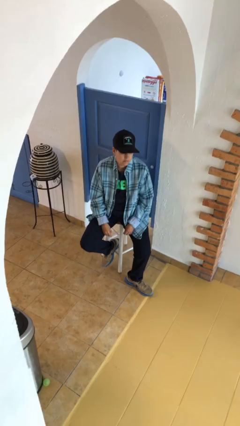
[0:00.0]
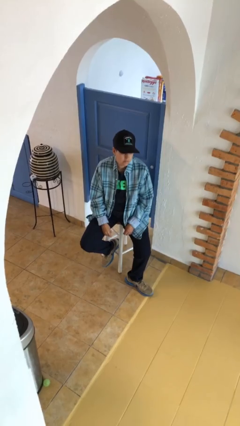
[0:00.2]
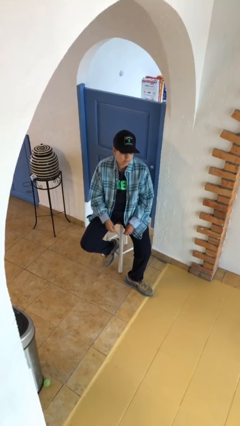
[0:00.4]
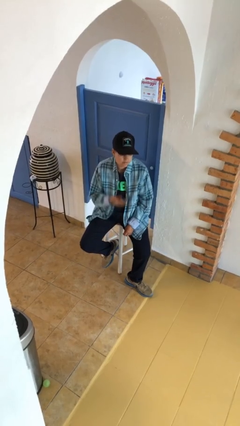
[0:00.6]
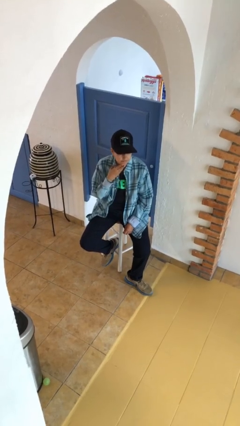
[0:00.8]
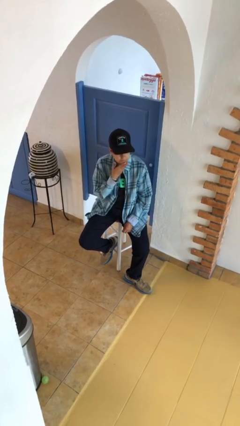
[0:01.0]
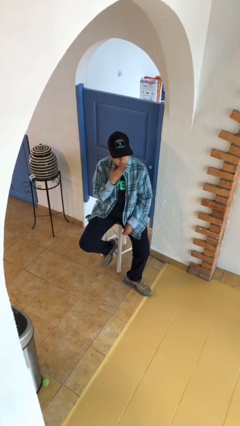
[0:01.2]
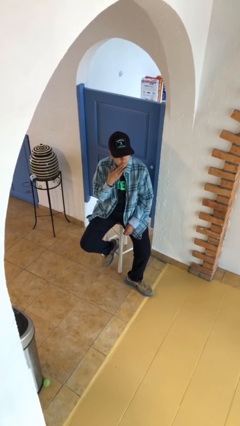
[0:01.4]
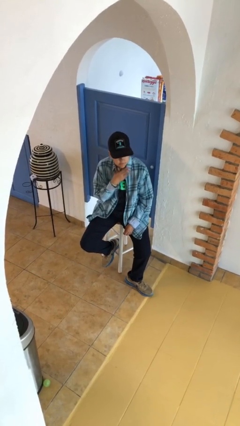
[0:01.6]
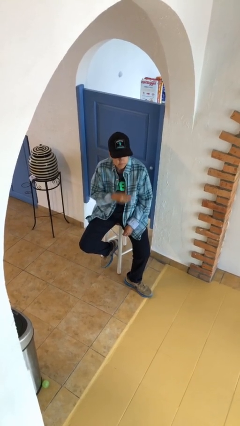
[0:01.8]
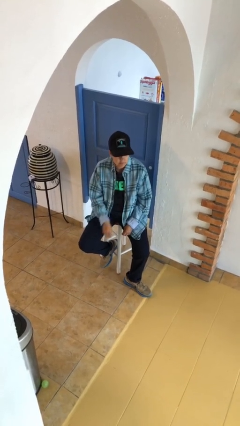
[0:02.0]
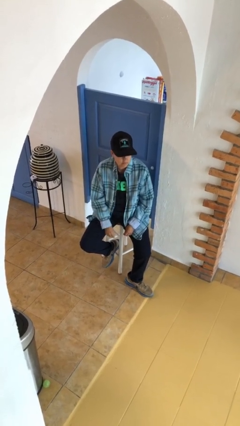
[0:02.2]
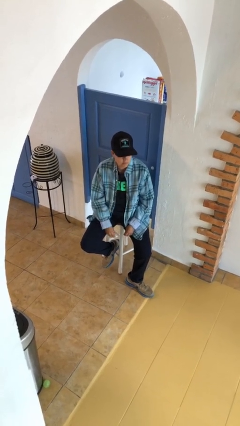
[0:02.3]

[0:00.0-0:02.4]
person strokes chin

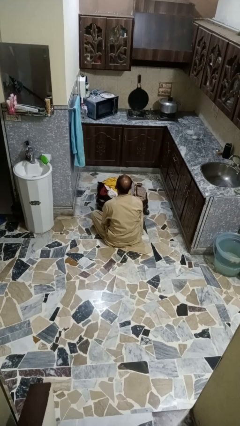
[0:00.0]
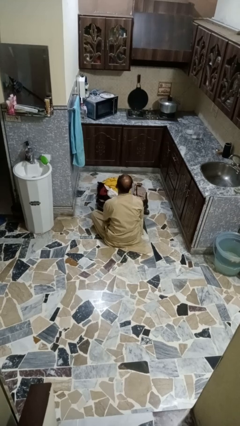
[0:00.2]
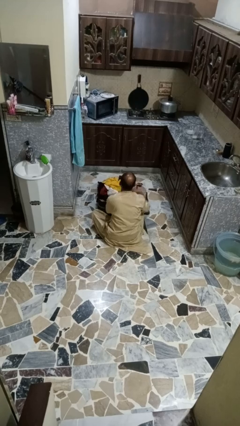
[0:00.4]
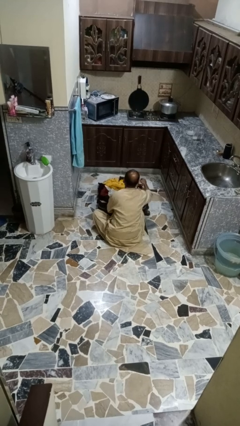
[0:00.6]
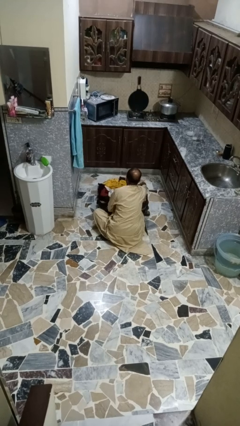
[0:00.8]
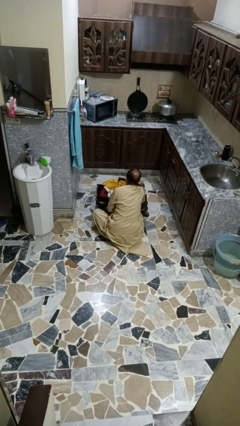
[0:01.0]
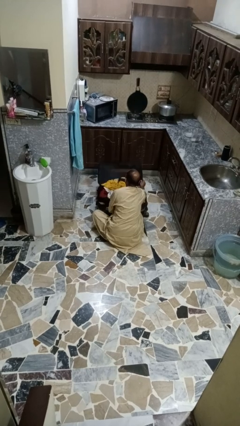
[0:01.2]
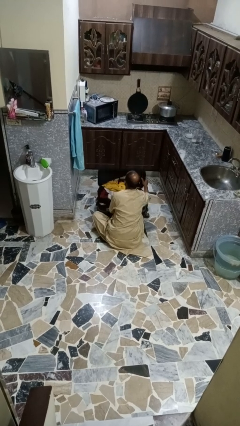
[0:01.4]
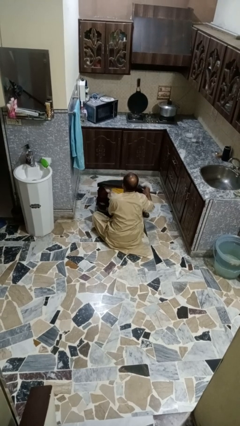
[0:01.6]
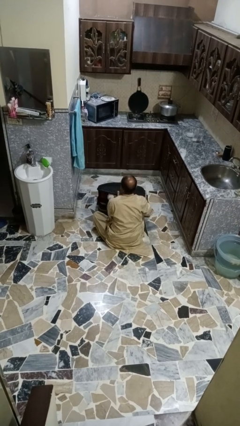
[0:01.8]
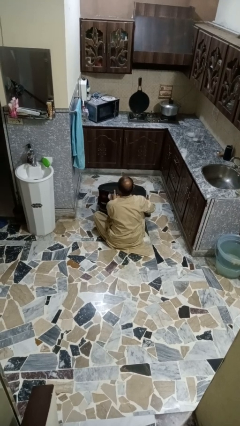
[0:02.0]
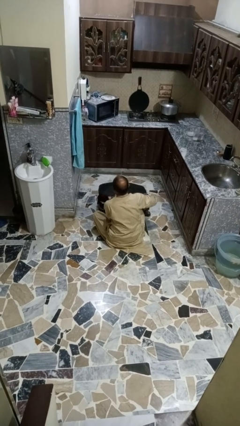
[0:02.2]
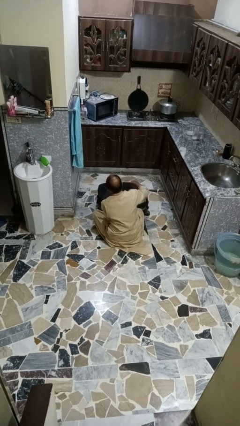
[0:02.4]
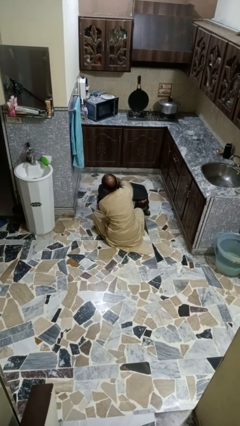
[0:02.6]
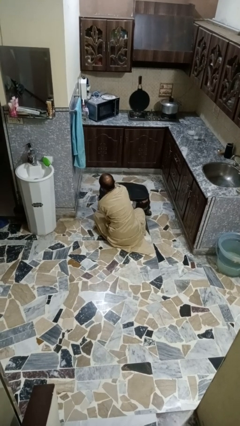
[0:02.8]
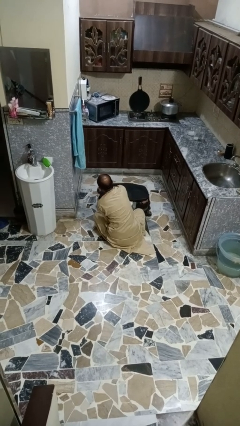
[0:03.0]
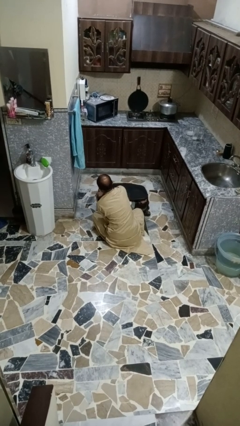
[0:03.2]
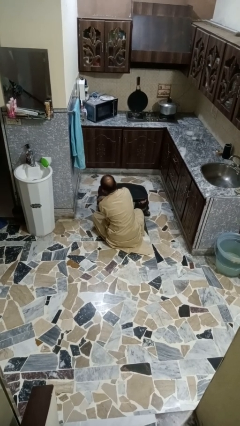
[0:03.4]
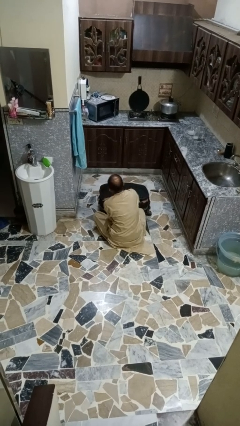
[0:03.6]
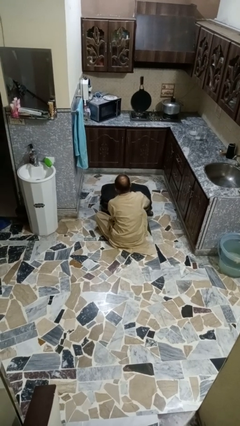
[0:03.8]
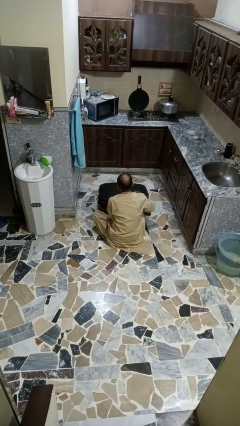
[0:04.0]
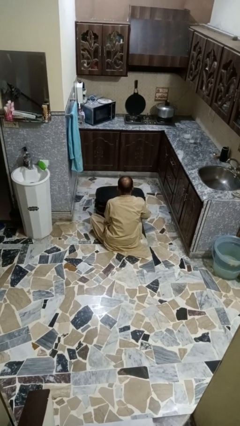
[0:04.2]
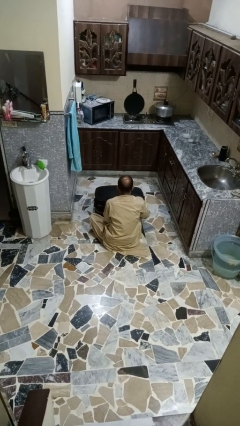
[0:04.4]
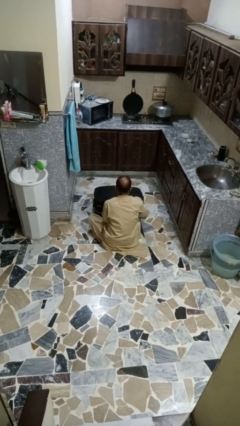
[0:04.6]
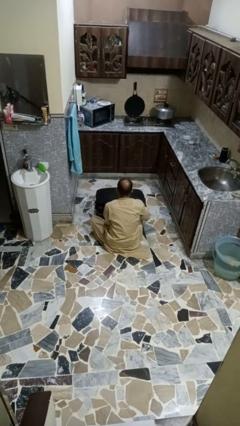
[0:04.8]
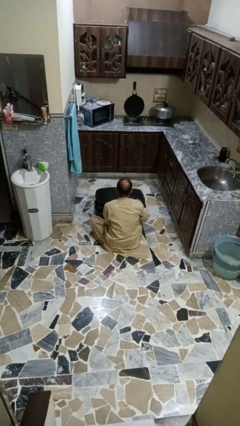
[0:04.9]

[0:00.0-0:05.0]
person closes suitcase

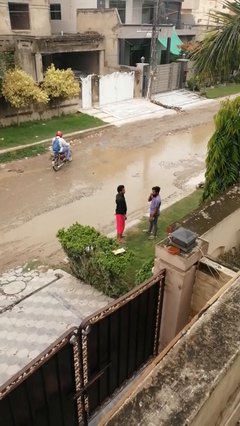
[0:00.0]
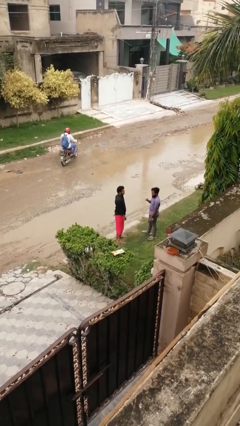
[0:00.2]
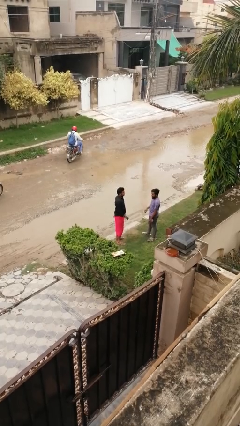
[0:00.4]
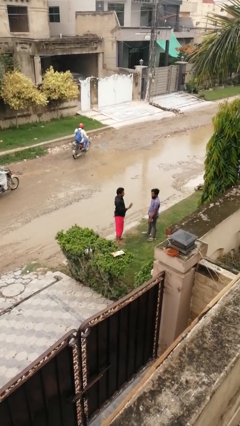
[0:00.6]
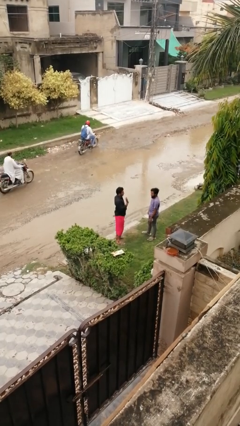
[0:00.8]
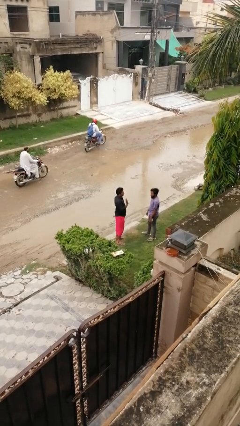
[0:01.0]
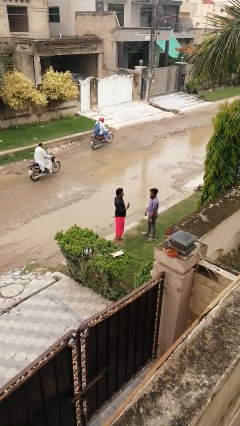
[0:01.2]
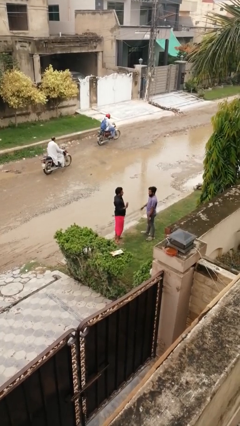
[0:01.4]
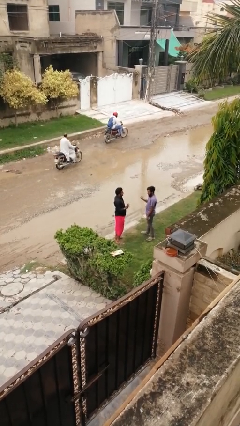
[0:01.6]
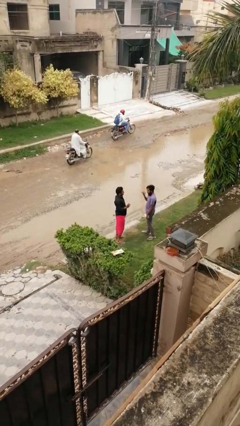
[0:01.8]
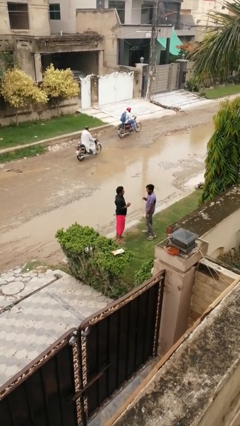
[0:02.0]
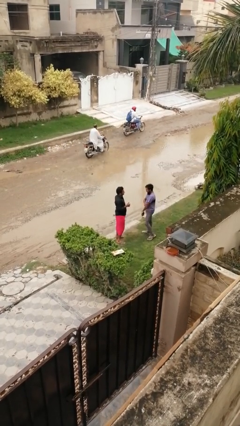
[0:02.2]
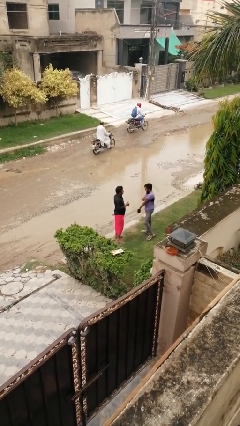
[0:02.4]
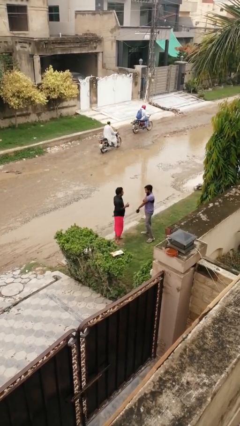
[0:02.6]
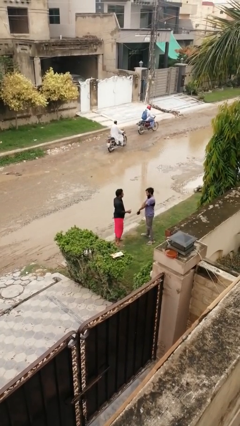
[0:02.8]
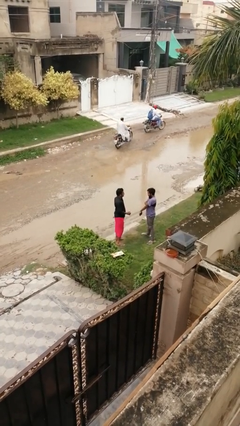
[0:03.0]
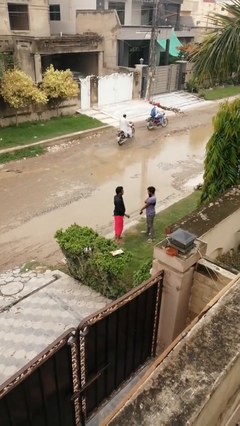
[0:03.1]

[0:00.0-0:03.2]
person talks to person

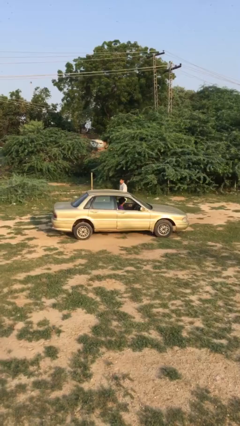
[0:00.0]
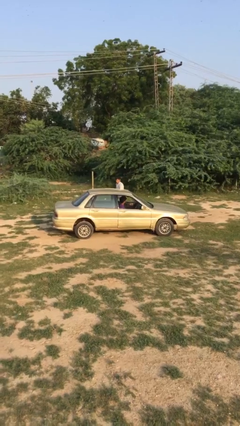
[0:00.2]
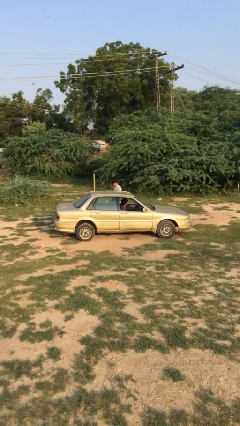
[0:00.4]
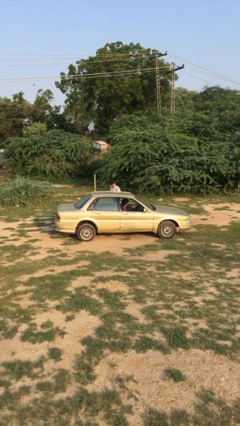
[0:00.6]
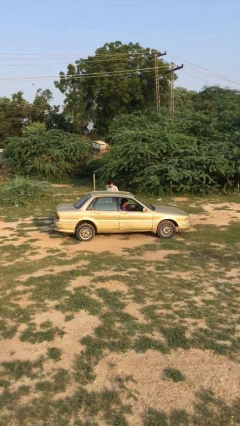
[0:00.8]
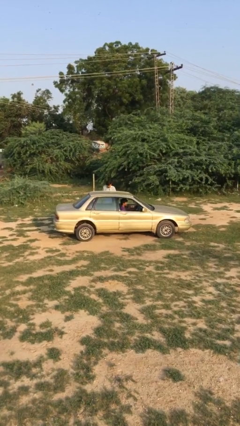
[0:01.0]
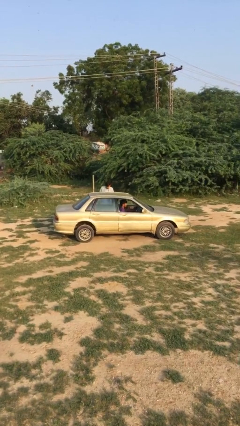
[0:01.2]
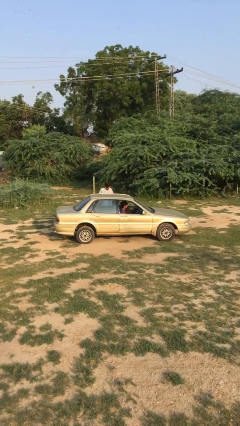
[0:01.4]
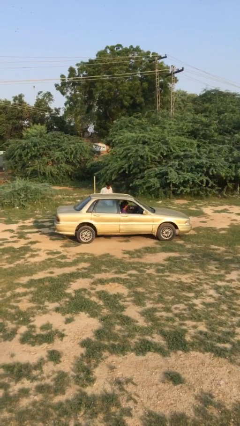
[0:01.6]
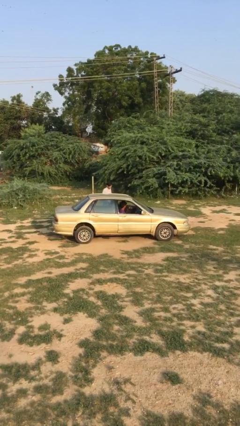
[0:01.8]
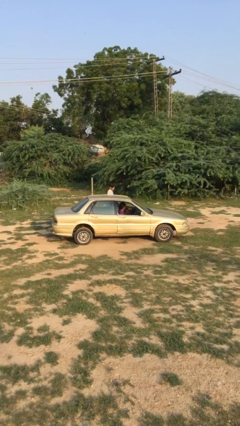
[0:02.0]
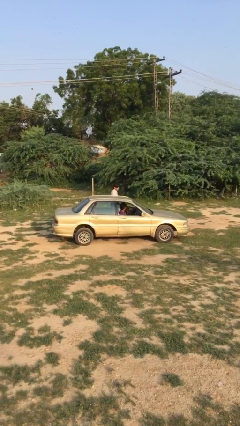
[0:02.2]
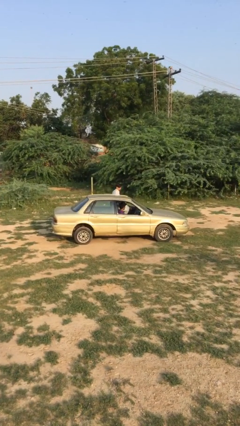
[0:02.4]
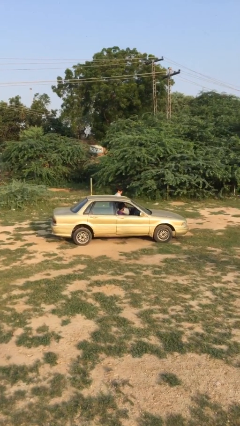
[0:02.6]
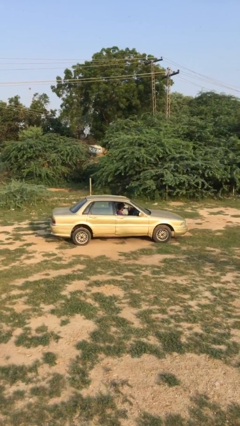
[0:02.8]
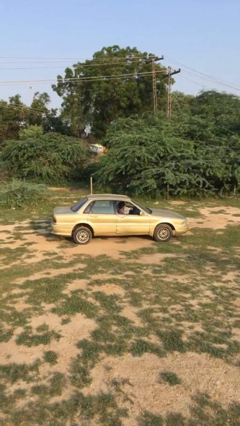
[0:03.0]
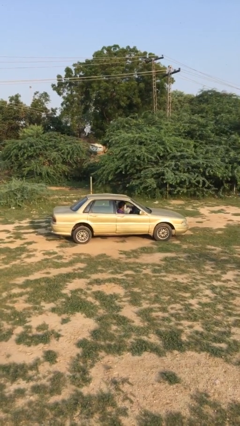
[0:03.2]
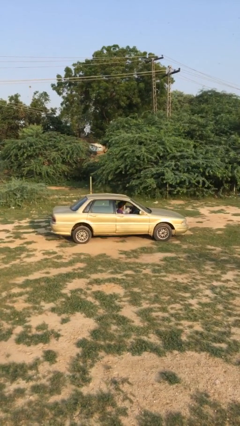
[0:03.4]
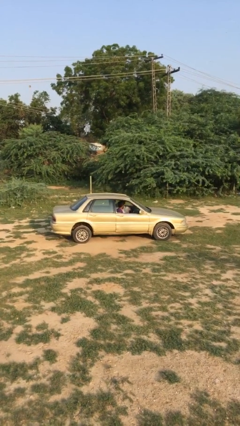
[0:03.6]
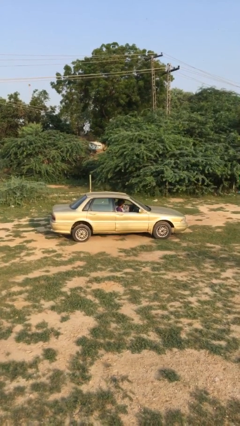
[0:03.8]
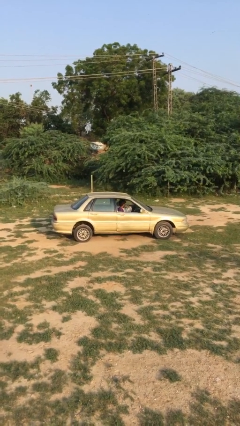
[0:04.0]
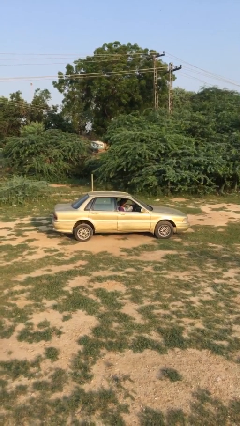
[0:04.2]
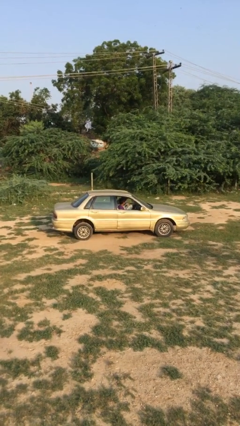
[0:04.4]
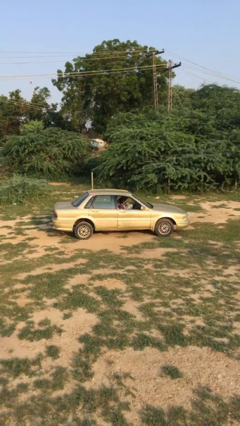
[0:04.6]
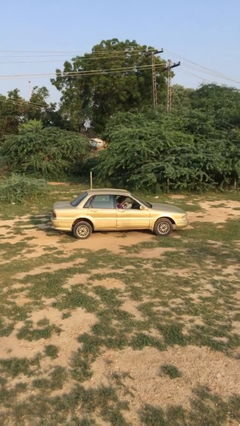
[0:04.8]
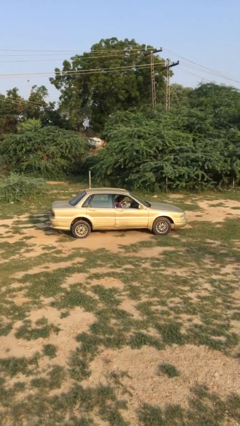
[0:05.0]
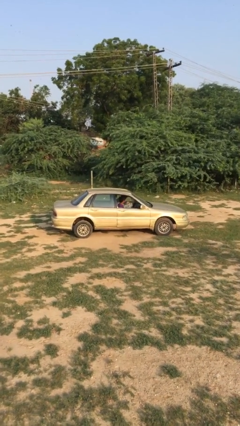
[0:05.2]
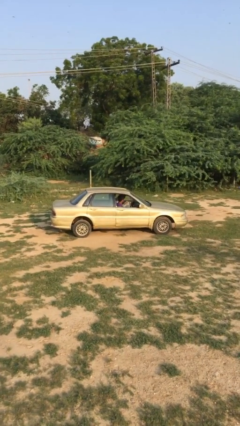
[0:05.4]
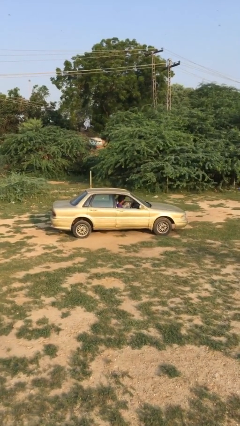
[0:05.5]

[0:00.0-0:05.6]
car picks up person

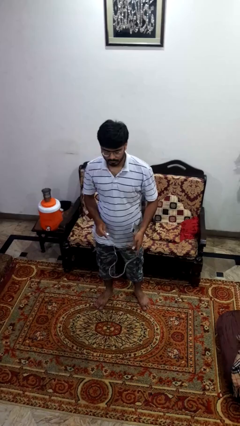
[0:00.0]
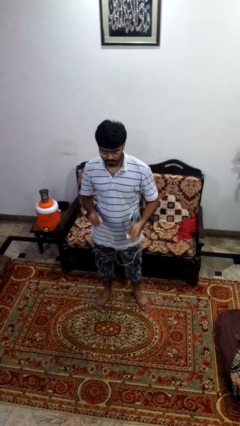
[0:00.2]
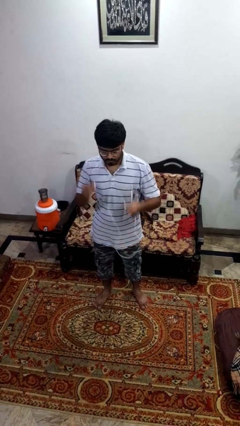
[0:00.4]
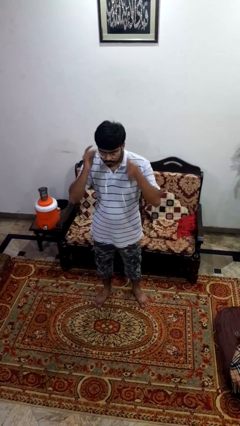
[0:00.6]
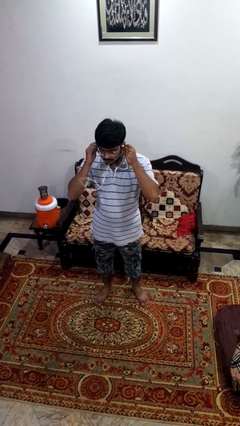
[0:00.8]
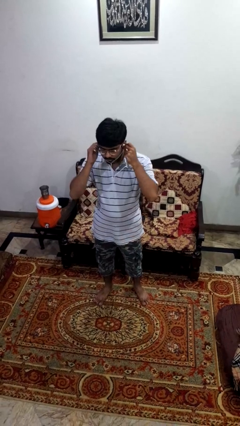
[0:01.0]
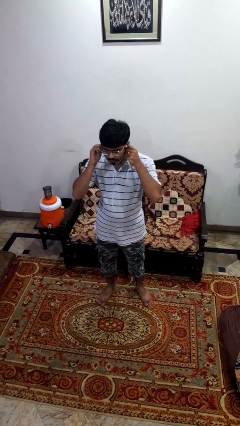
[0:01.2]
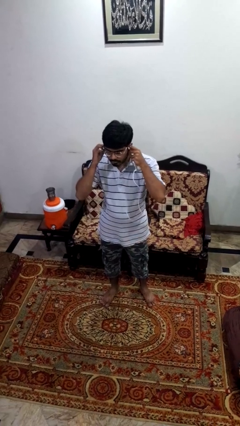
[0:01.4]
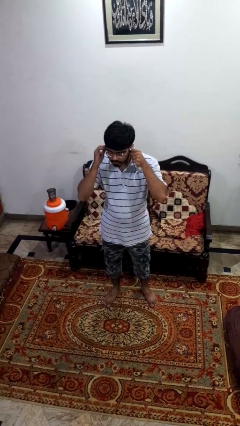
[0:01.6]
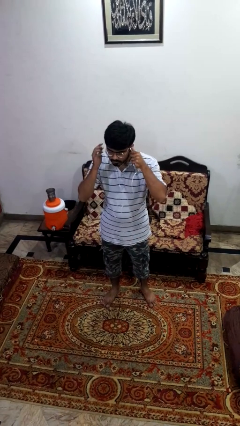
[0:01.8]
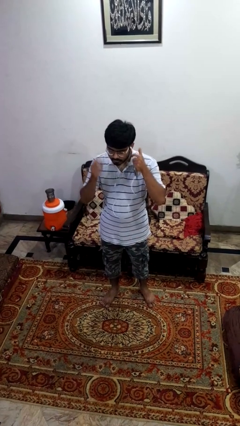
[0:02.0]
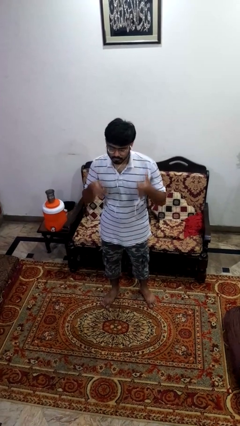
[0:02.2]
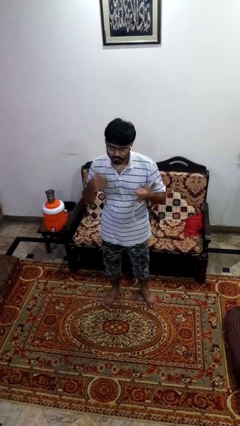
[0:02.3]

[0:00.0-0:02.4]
person puts on headphones
